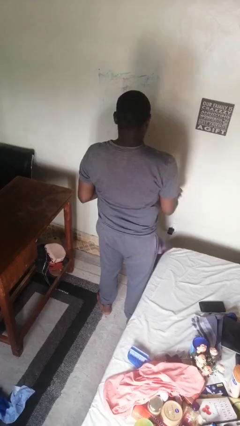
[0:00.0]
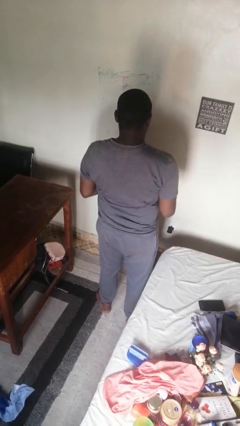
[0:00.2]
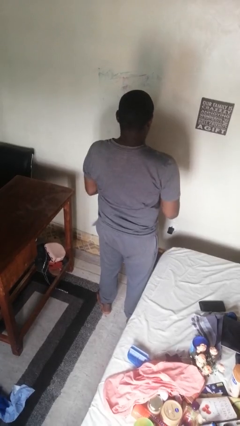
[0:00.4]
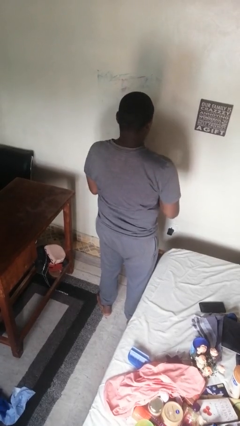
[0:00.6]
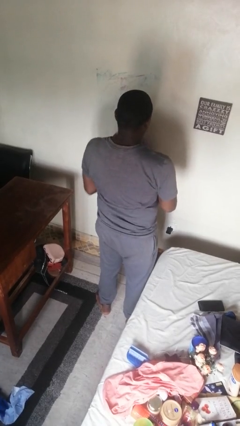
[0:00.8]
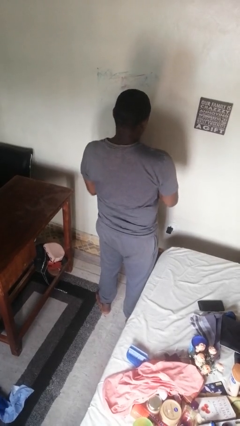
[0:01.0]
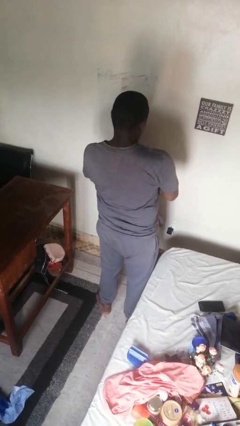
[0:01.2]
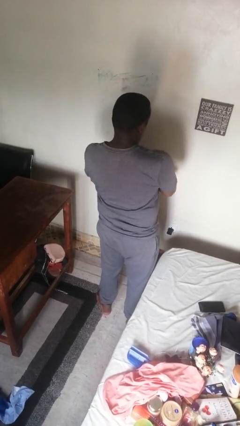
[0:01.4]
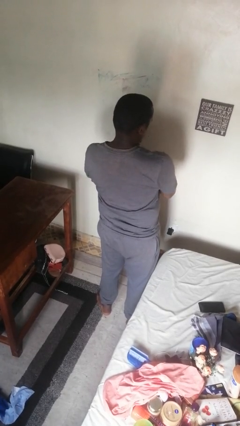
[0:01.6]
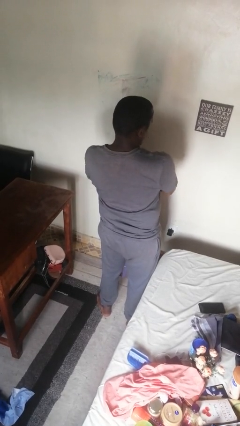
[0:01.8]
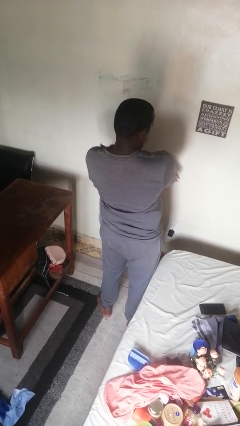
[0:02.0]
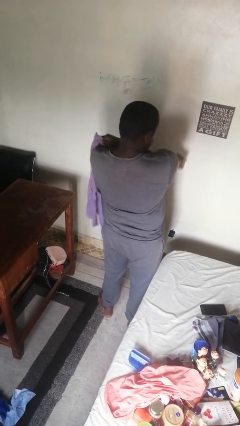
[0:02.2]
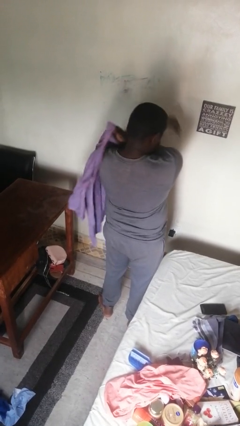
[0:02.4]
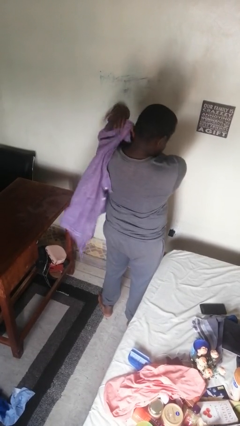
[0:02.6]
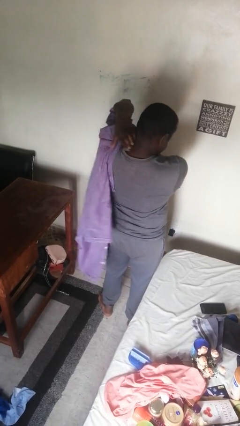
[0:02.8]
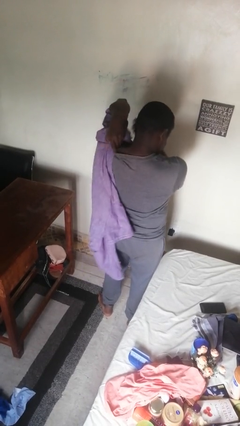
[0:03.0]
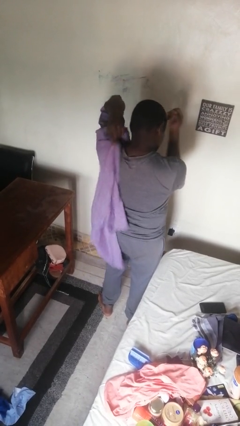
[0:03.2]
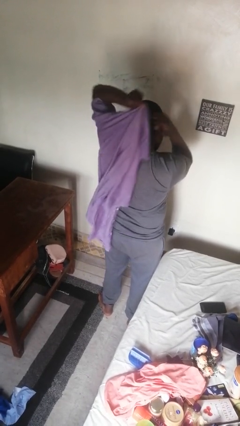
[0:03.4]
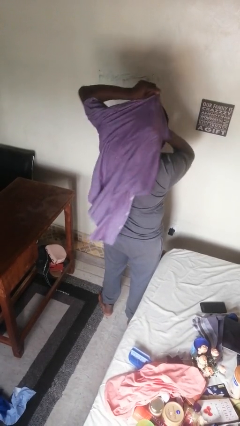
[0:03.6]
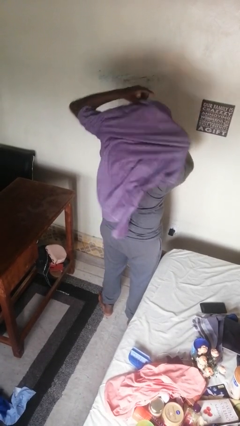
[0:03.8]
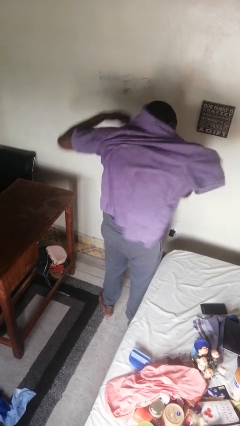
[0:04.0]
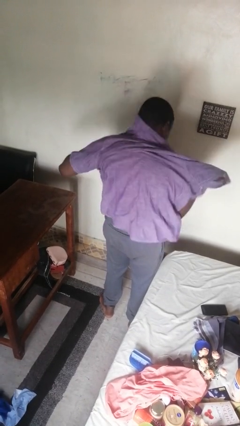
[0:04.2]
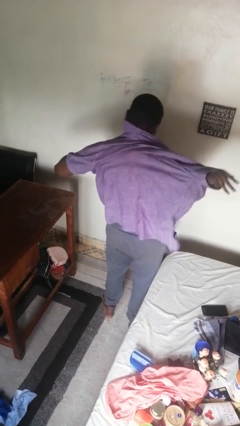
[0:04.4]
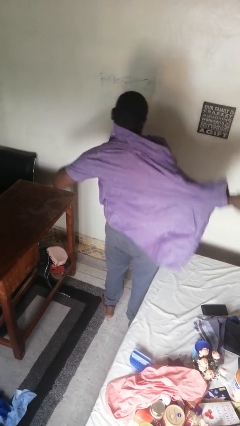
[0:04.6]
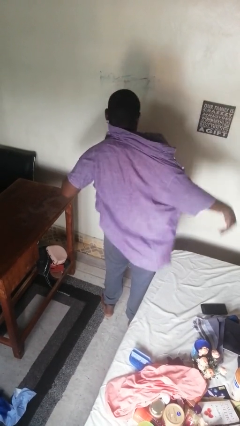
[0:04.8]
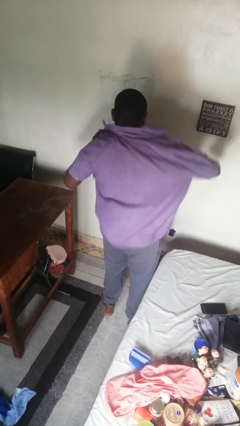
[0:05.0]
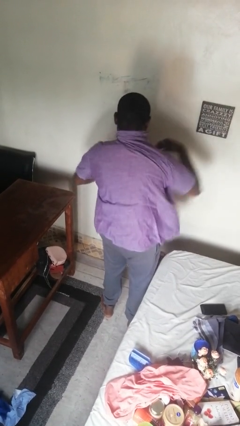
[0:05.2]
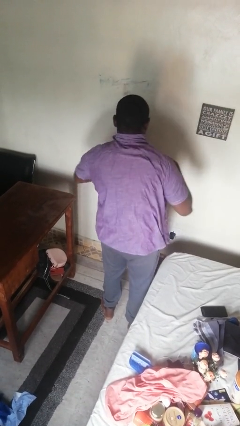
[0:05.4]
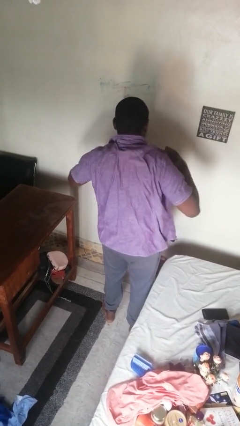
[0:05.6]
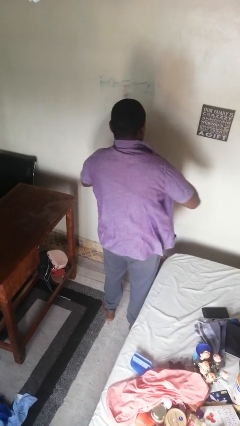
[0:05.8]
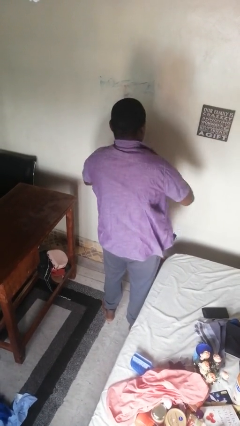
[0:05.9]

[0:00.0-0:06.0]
person puts on shirt

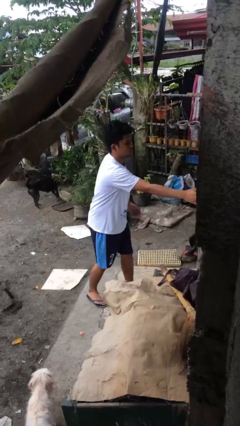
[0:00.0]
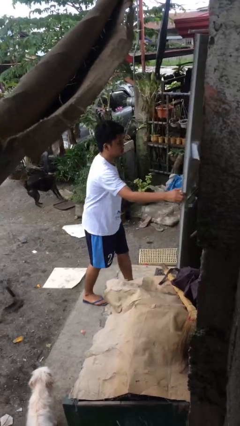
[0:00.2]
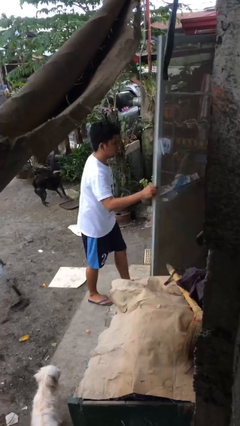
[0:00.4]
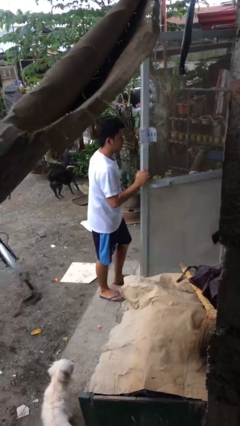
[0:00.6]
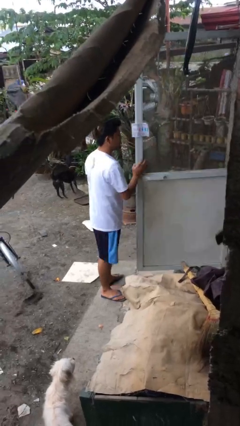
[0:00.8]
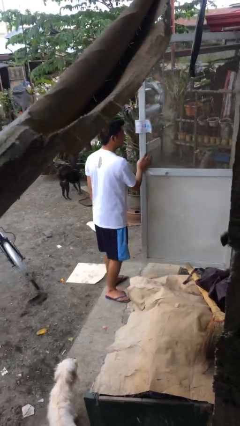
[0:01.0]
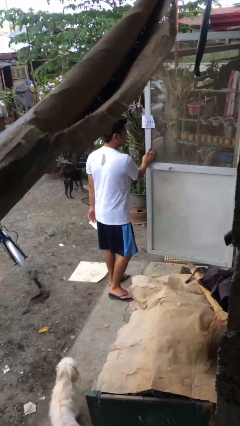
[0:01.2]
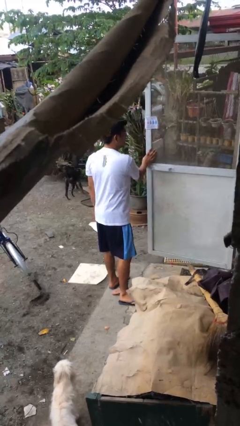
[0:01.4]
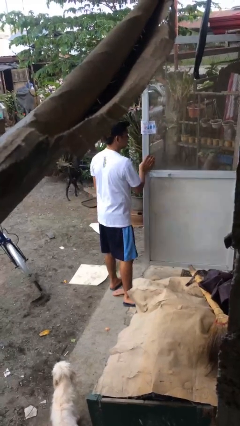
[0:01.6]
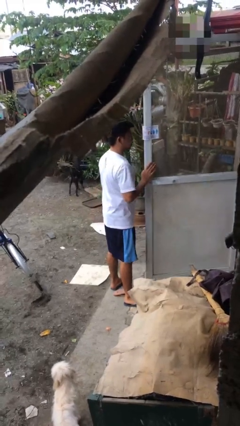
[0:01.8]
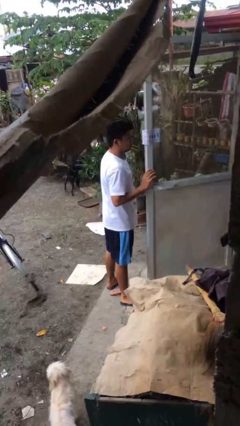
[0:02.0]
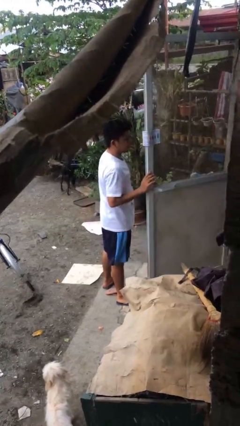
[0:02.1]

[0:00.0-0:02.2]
person opens facility door

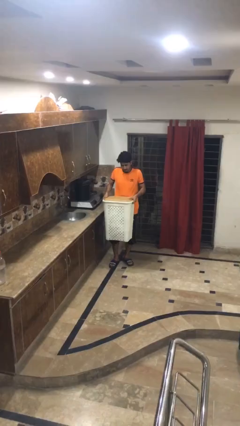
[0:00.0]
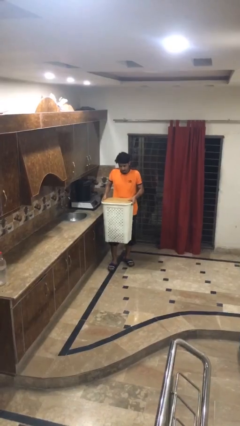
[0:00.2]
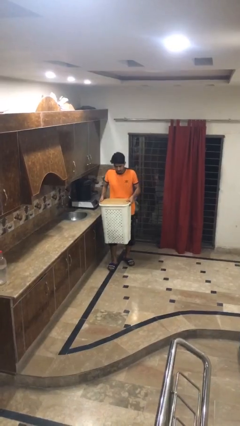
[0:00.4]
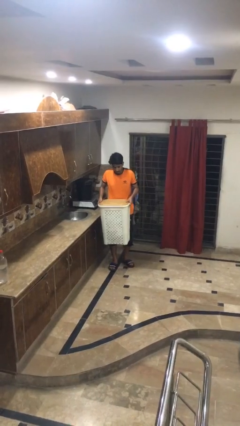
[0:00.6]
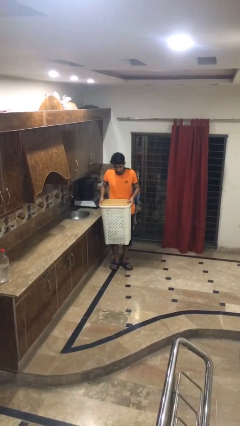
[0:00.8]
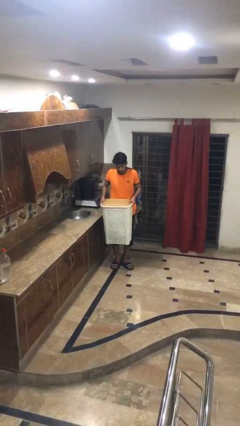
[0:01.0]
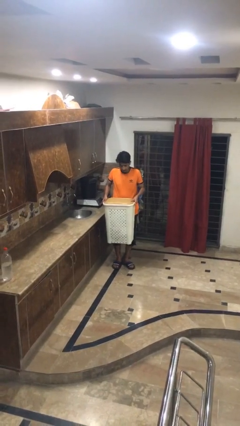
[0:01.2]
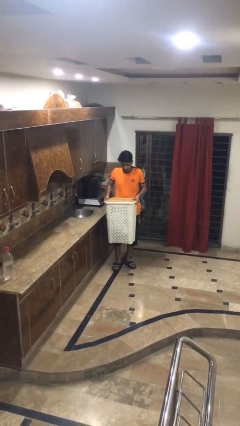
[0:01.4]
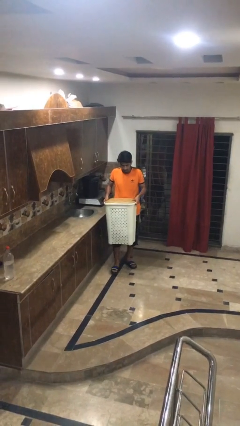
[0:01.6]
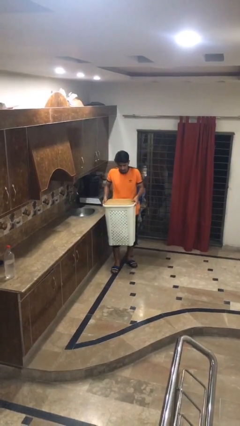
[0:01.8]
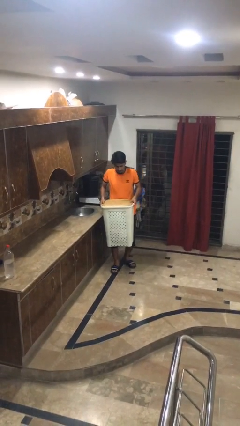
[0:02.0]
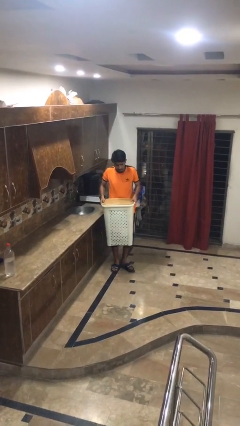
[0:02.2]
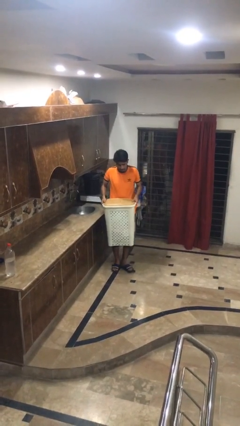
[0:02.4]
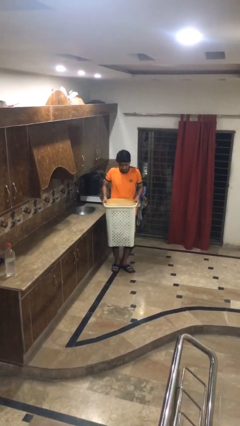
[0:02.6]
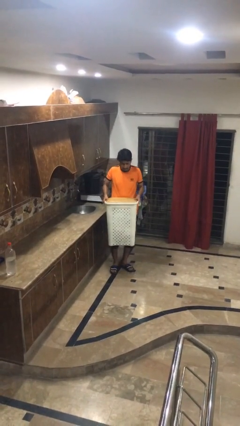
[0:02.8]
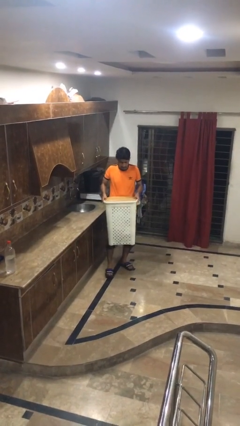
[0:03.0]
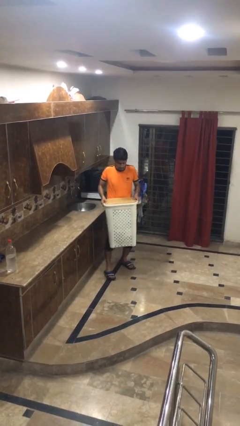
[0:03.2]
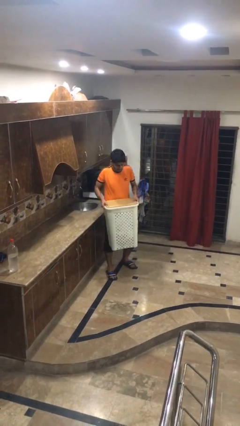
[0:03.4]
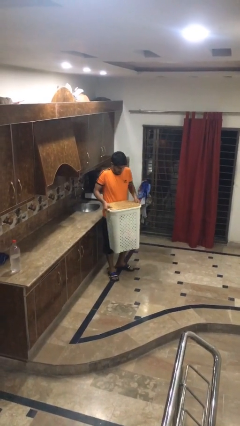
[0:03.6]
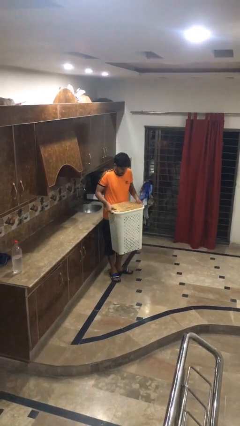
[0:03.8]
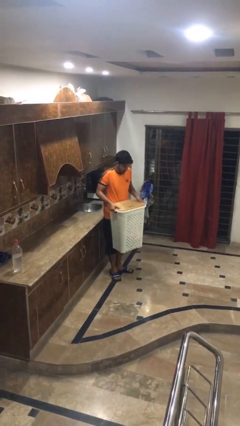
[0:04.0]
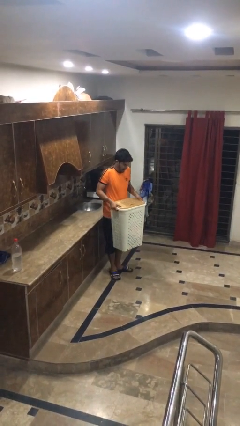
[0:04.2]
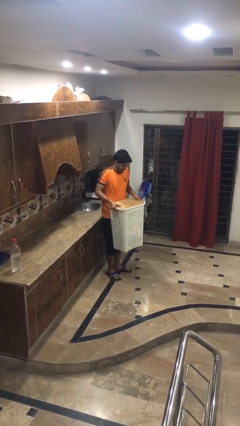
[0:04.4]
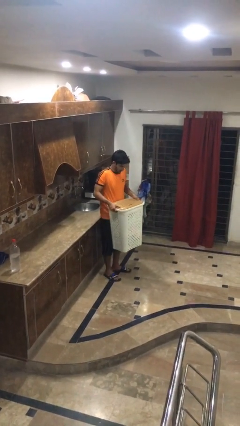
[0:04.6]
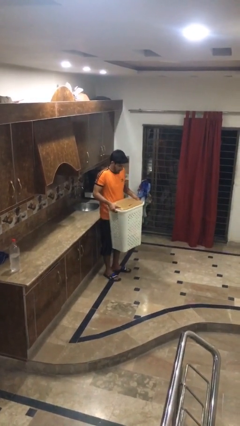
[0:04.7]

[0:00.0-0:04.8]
person carries laundry basket

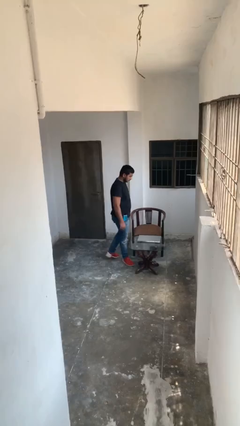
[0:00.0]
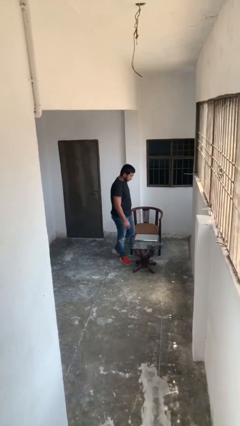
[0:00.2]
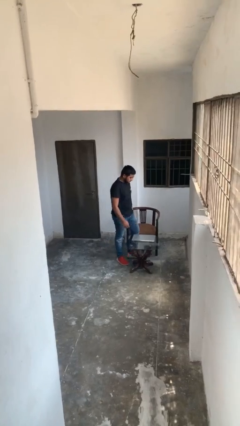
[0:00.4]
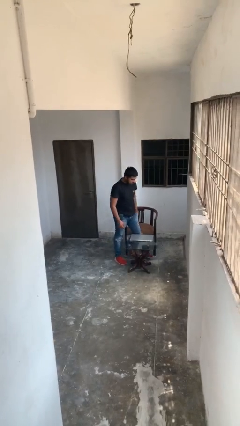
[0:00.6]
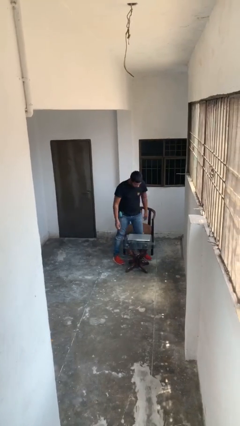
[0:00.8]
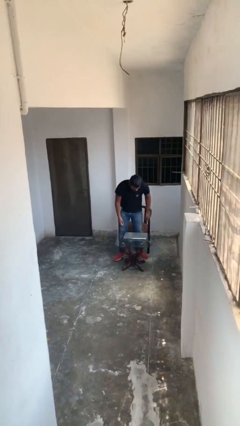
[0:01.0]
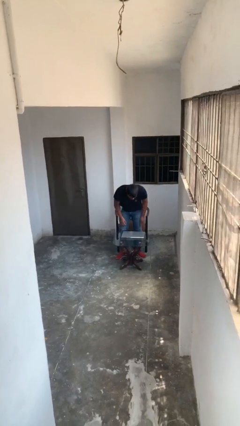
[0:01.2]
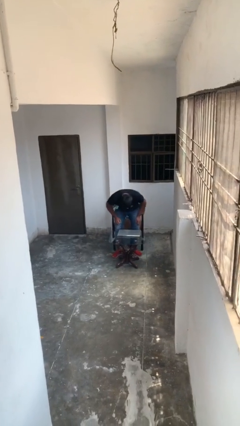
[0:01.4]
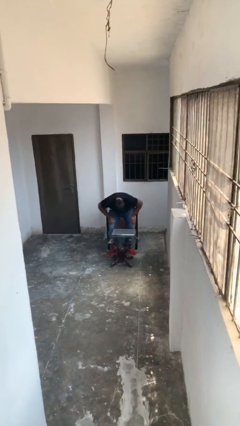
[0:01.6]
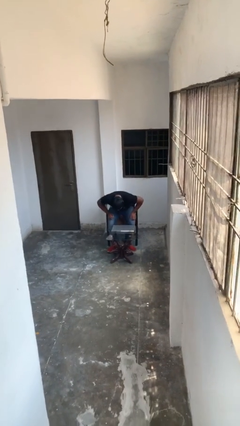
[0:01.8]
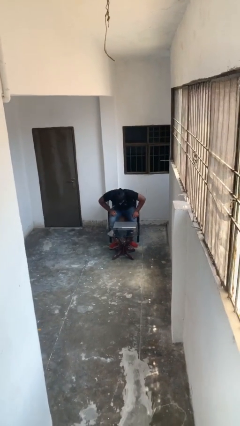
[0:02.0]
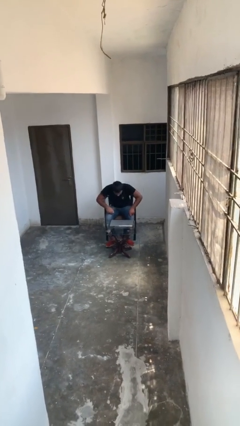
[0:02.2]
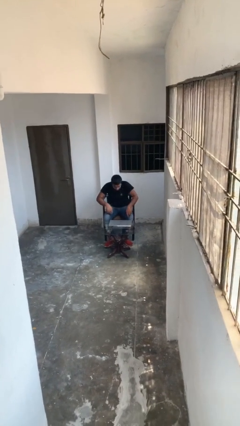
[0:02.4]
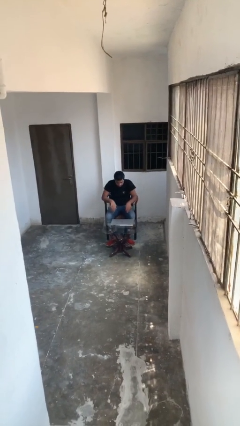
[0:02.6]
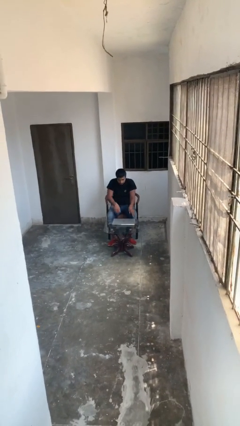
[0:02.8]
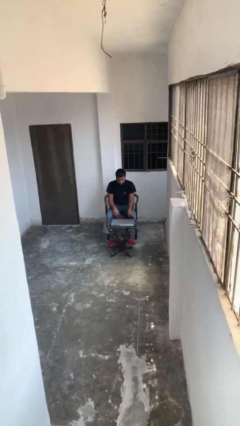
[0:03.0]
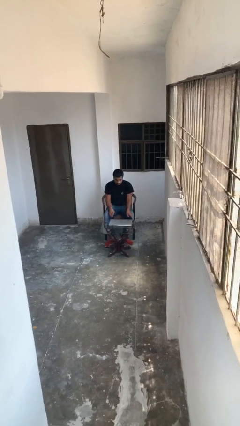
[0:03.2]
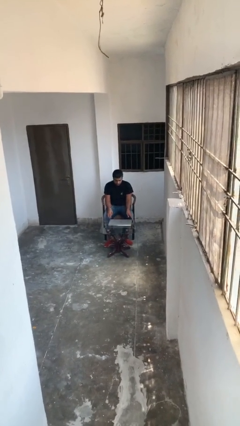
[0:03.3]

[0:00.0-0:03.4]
person sits down

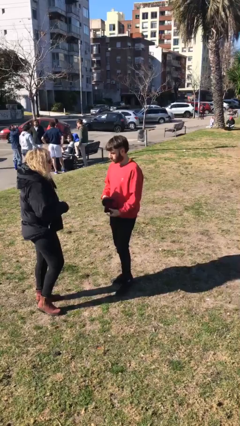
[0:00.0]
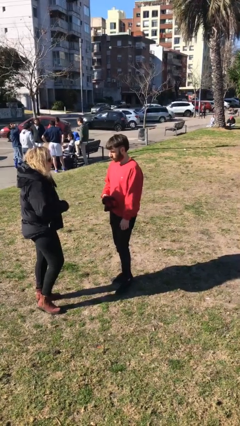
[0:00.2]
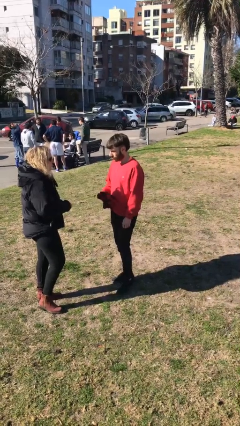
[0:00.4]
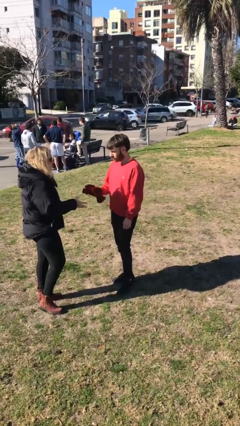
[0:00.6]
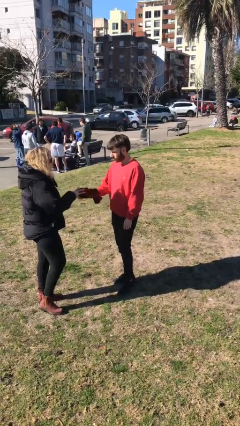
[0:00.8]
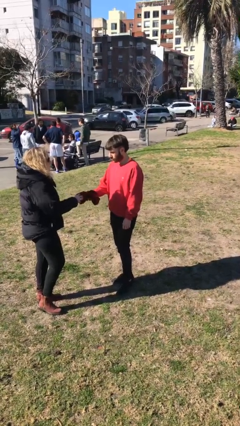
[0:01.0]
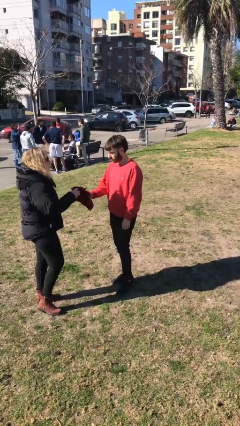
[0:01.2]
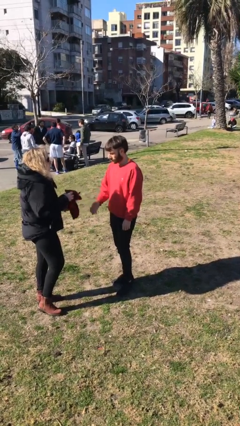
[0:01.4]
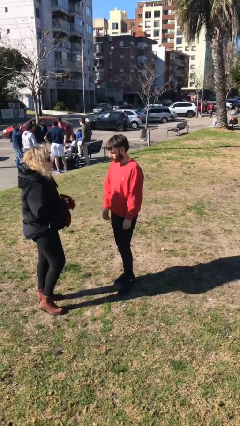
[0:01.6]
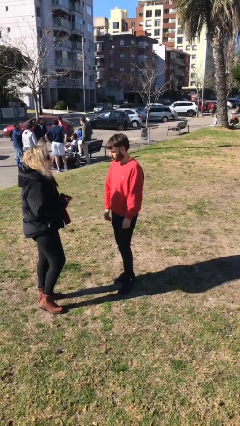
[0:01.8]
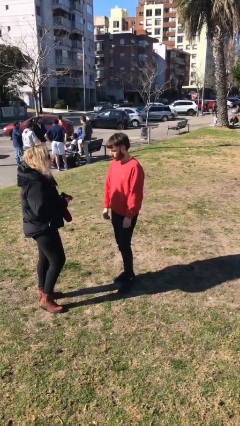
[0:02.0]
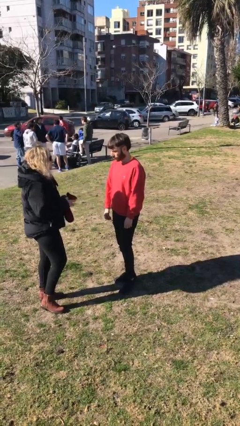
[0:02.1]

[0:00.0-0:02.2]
person transfers object to person
